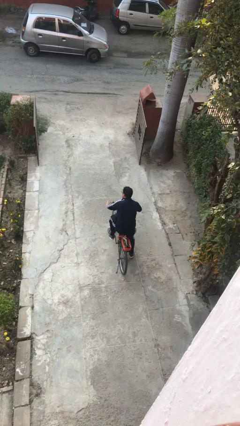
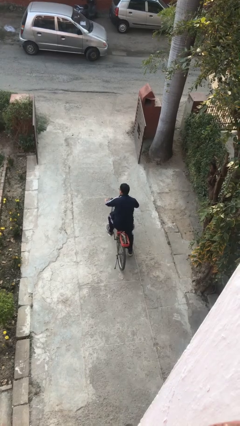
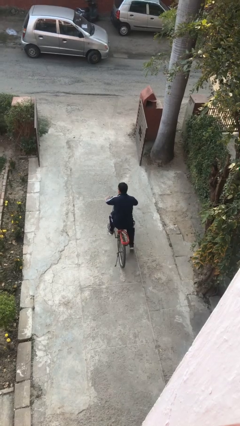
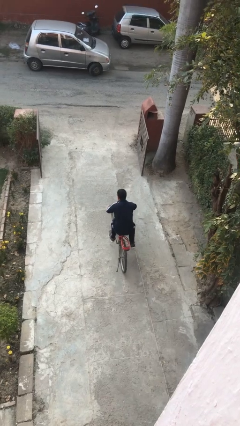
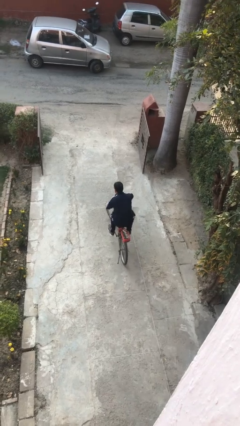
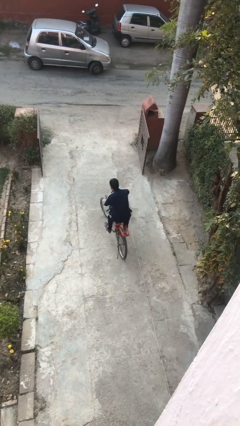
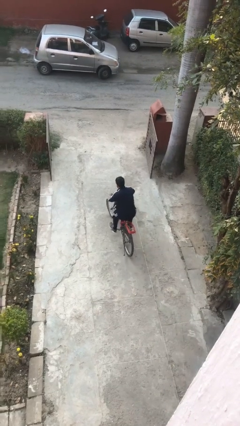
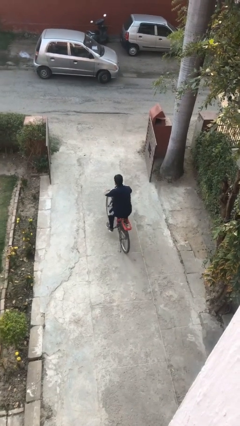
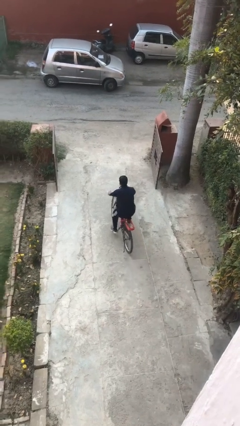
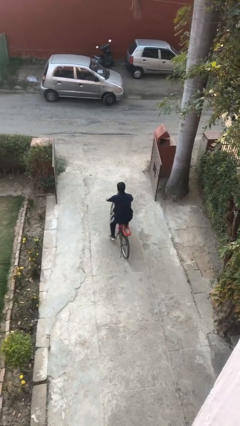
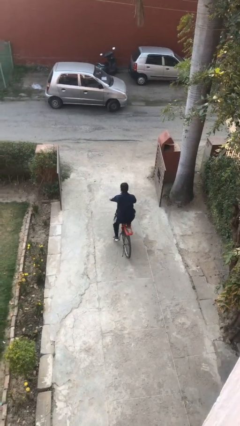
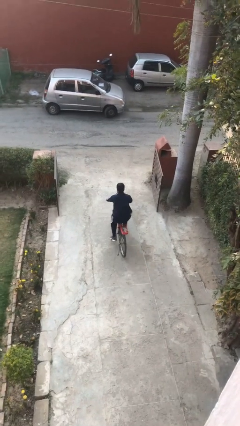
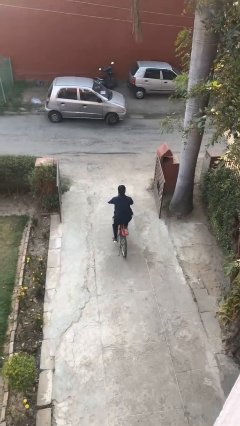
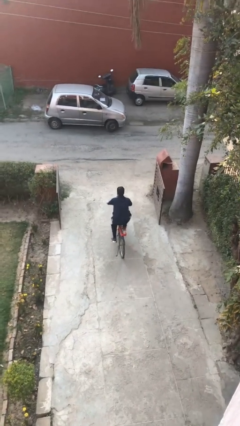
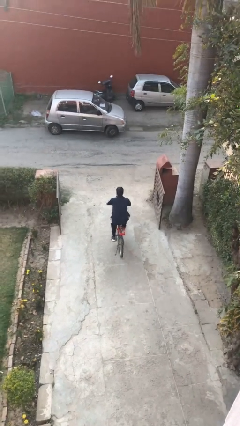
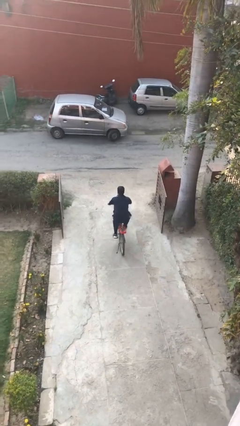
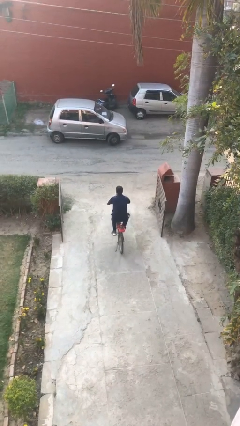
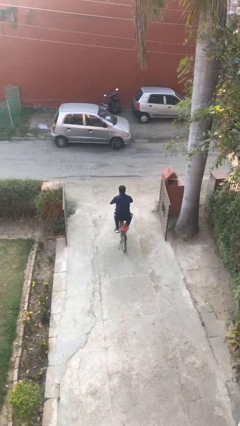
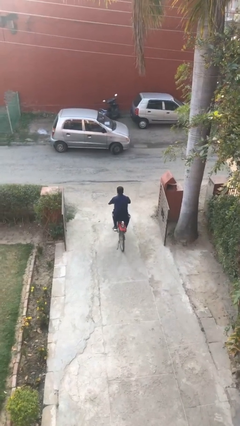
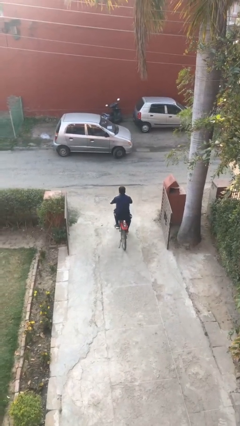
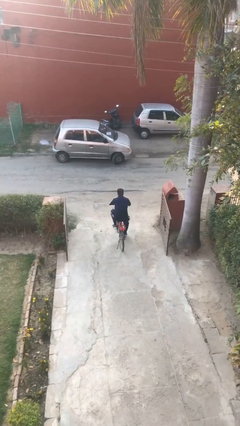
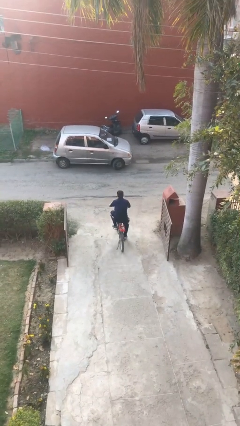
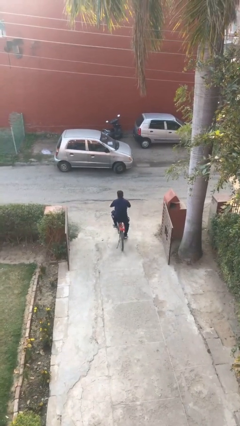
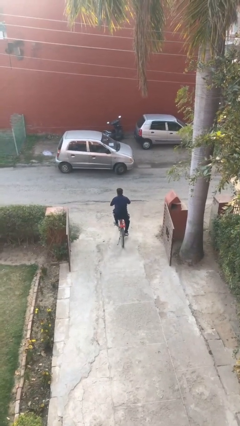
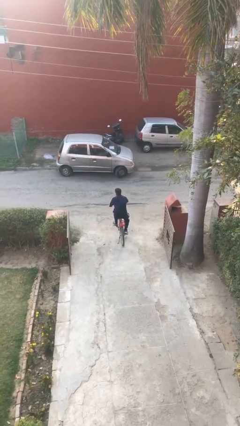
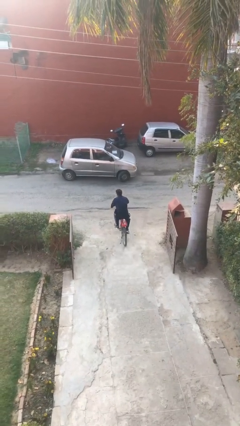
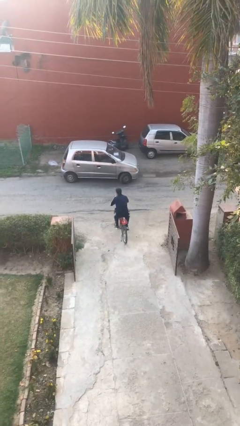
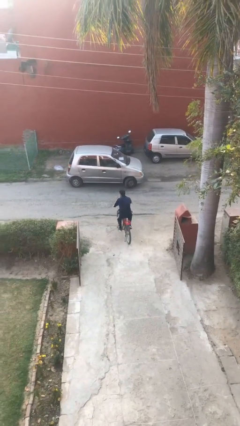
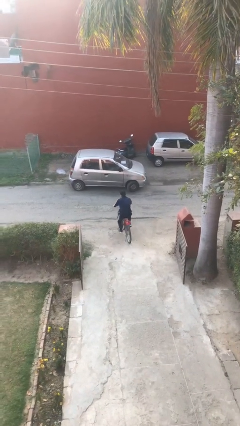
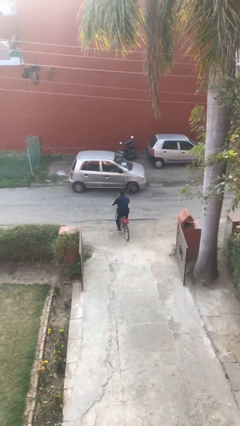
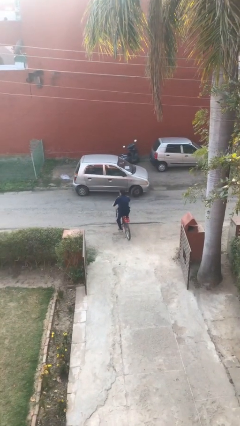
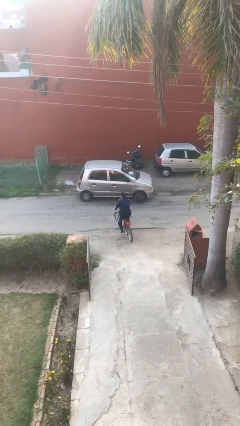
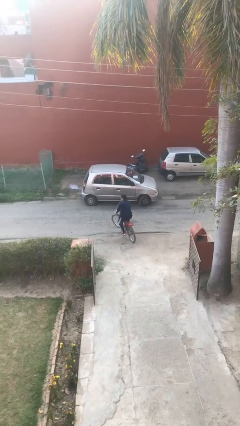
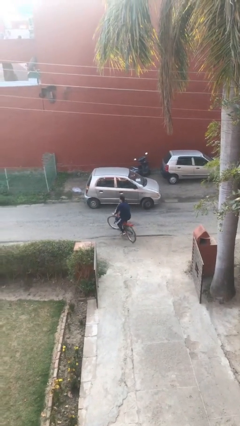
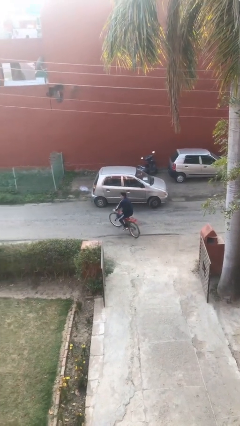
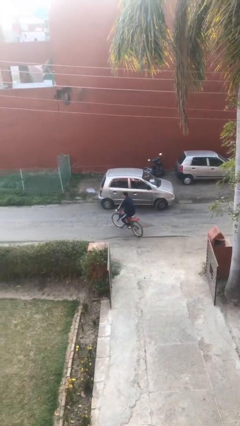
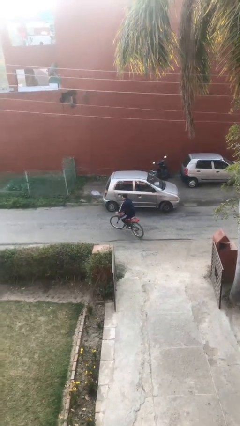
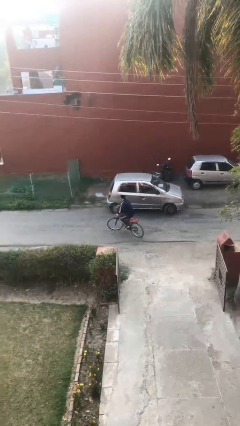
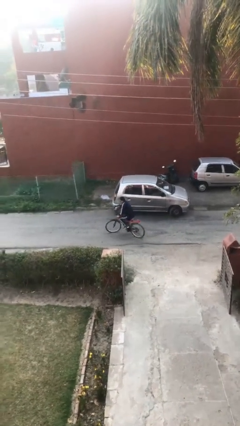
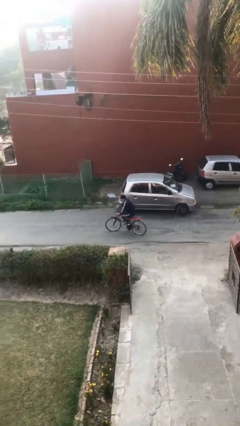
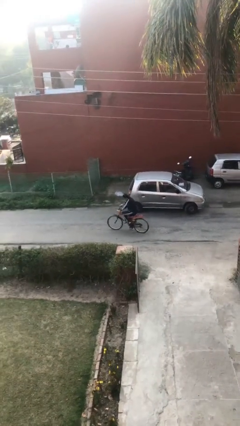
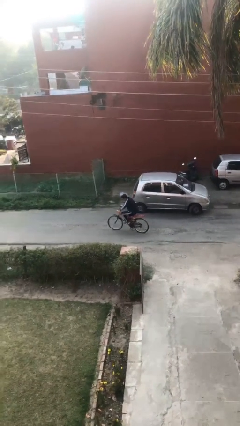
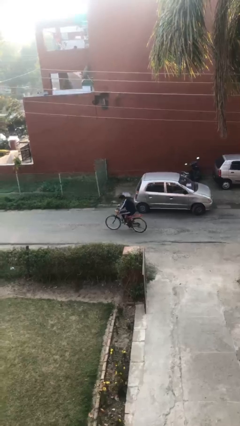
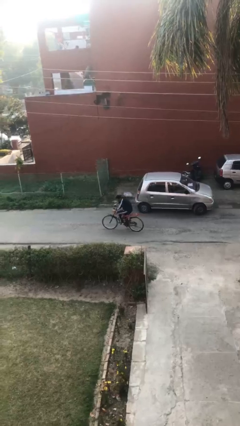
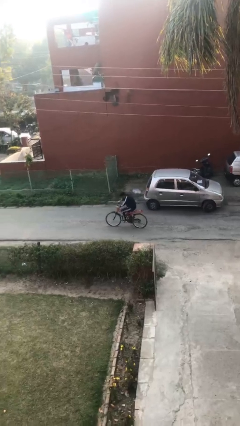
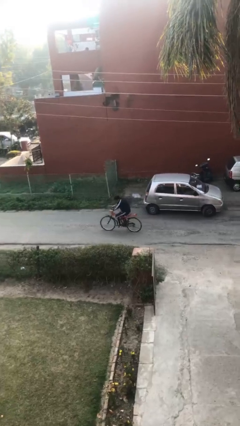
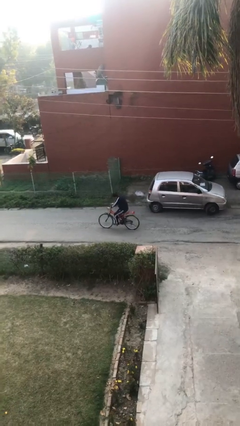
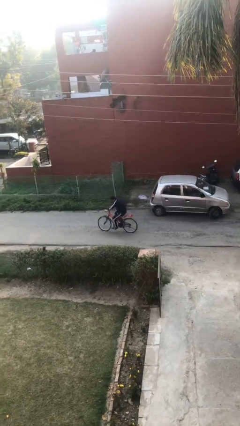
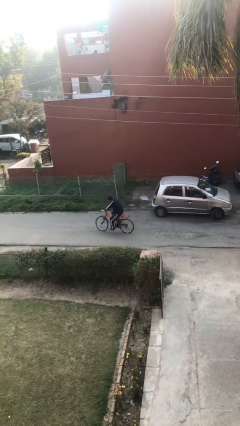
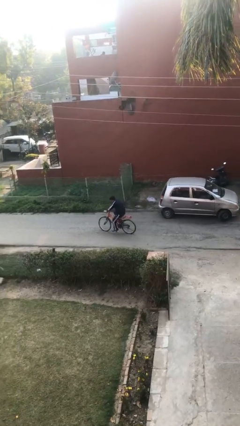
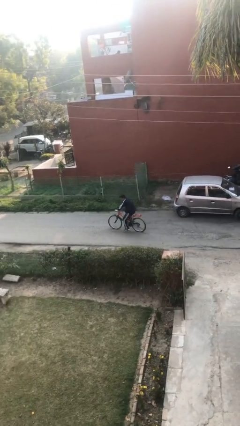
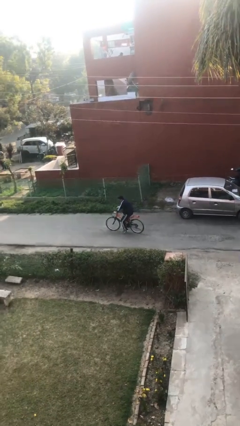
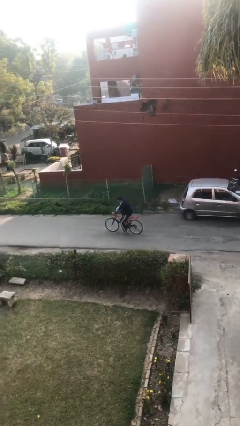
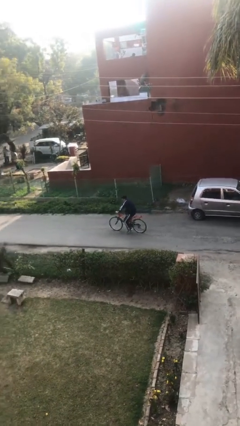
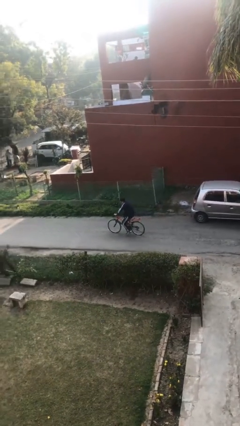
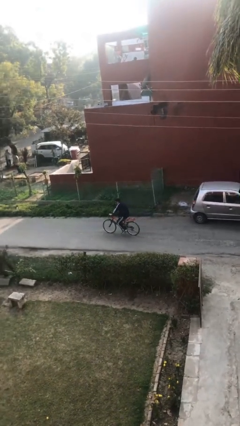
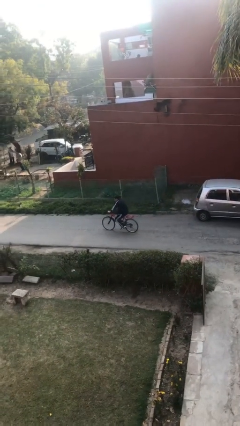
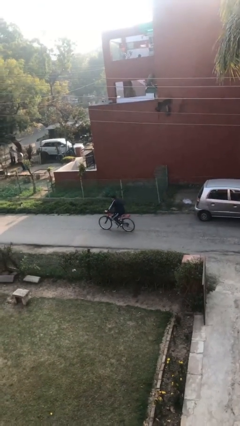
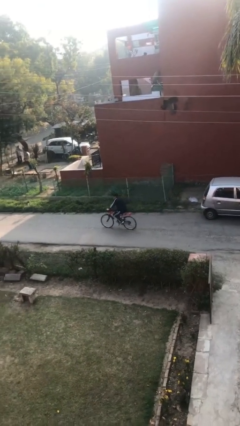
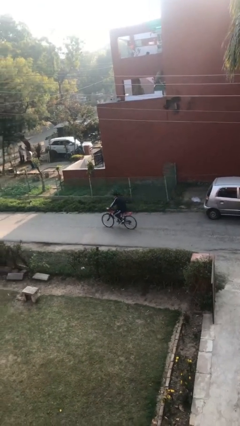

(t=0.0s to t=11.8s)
person rides bicycle

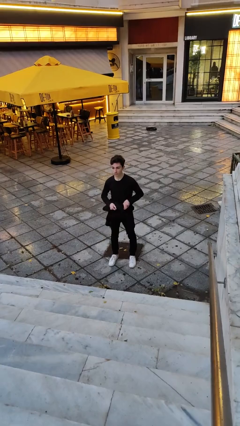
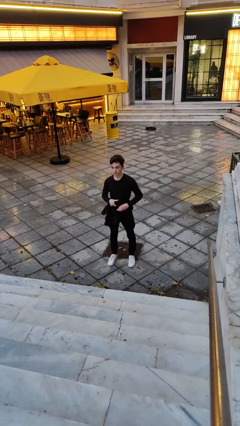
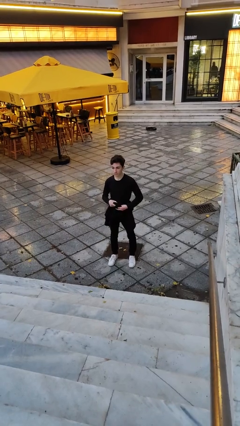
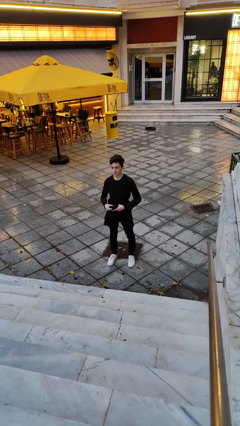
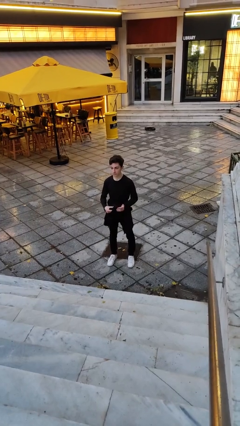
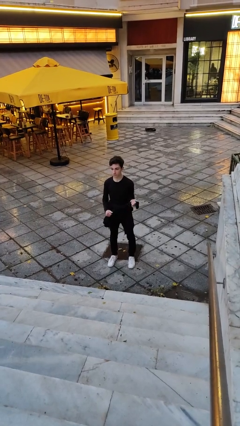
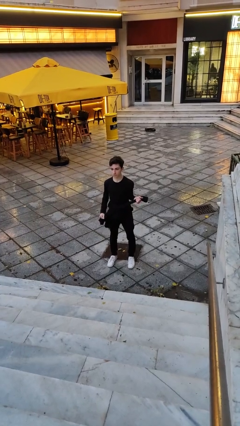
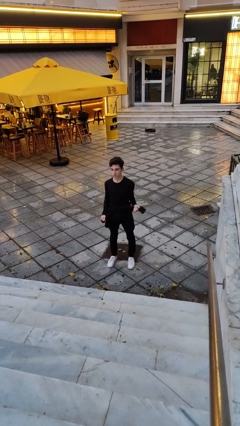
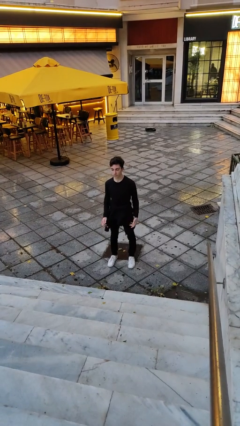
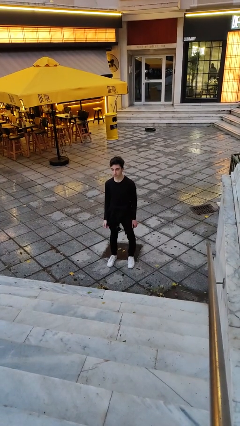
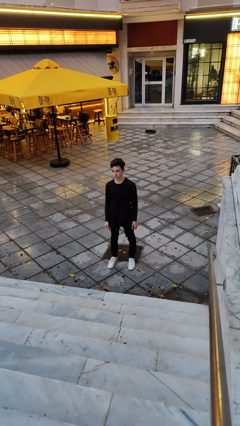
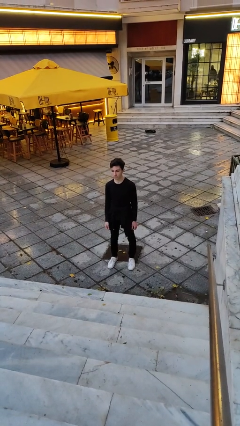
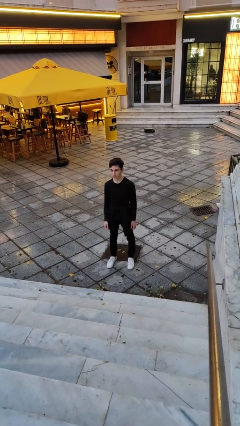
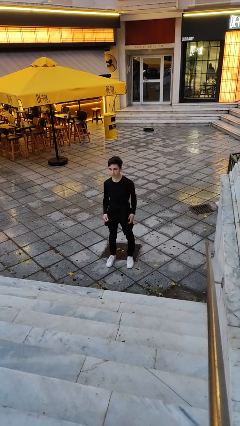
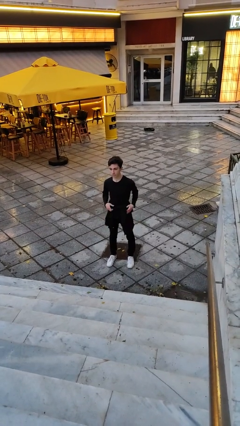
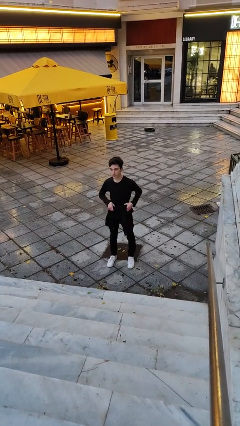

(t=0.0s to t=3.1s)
person ties jacket around waist

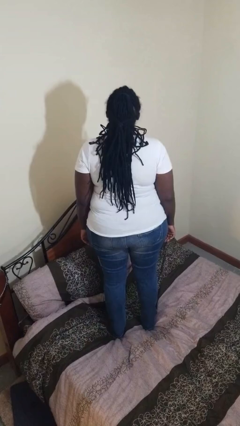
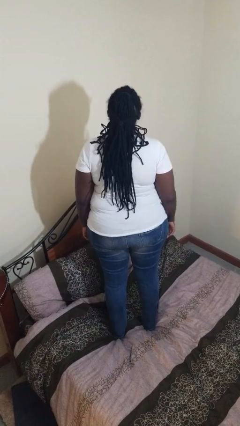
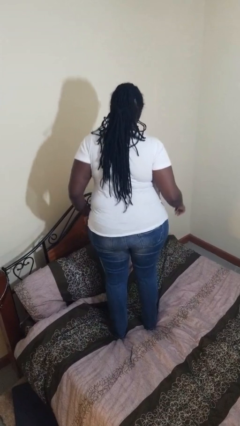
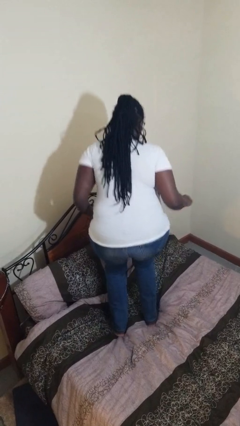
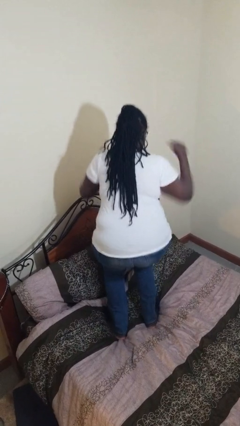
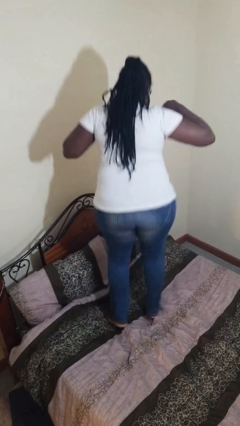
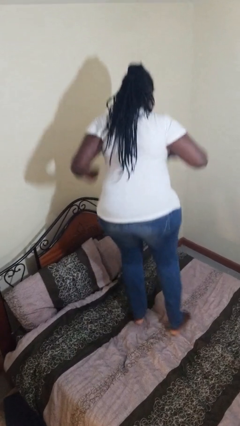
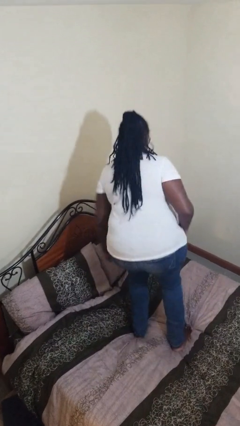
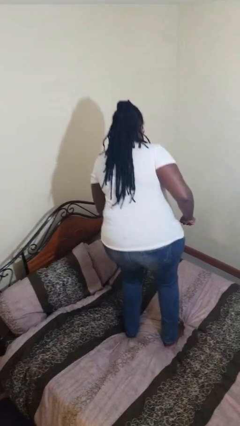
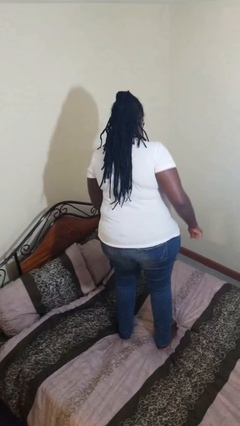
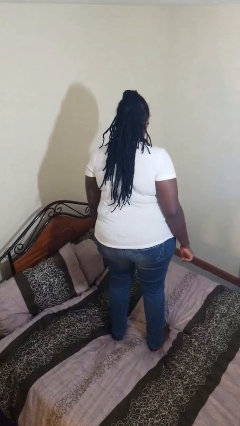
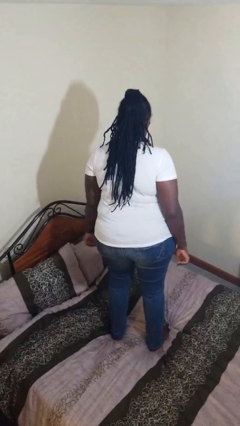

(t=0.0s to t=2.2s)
person jumps on bed

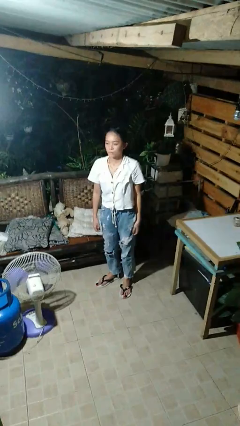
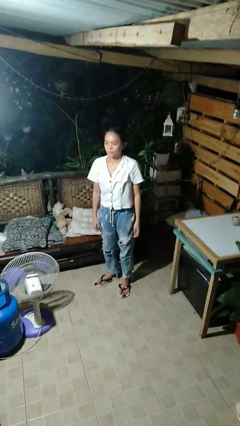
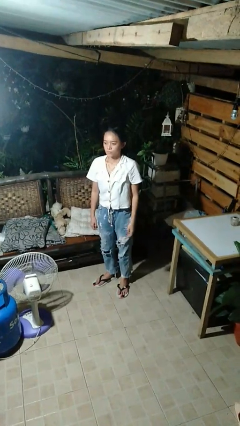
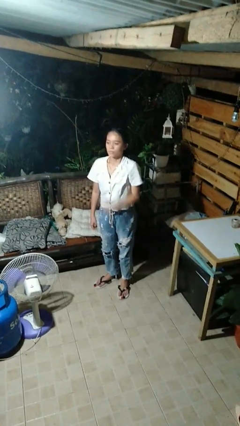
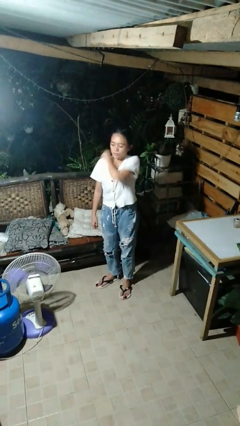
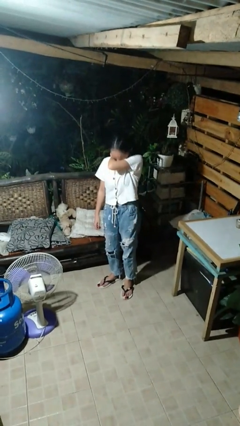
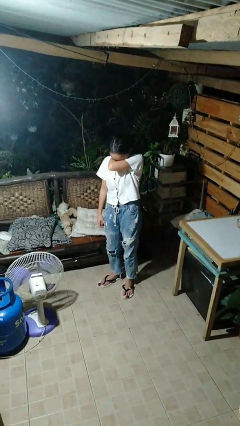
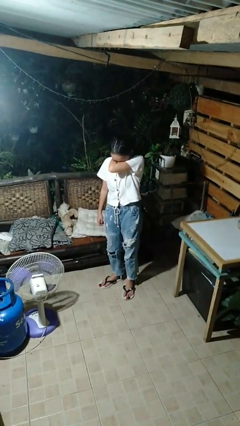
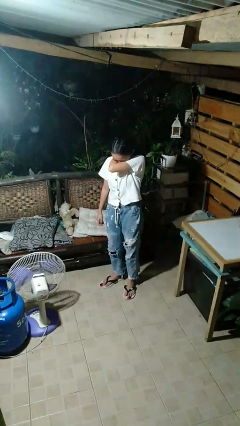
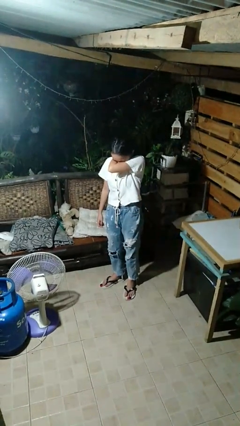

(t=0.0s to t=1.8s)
person sneezes into arm
